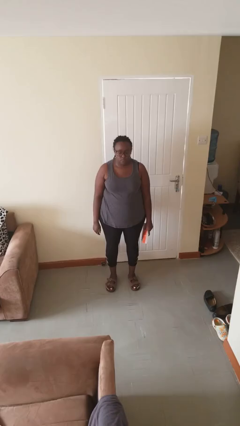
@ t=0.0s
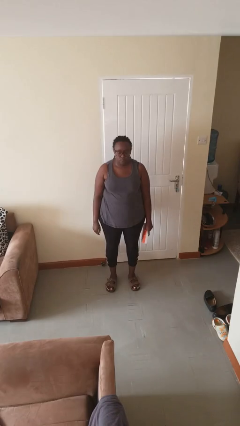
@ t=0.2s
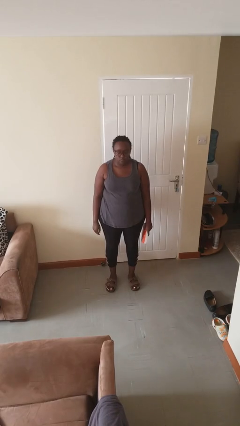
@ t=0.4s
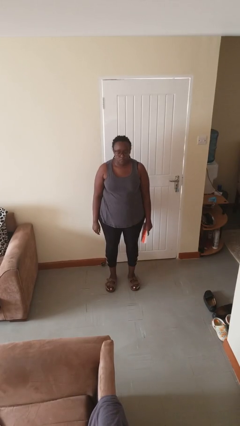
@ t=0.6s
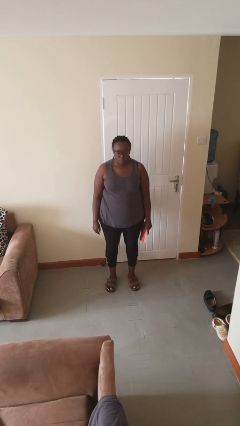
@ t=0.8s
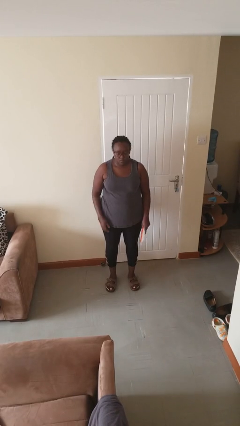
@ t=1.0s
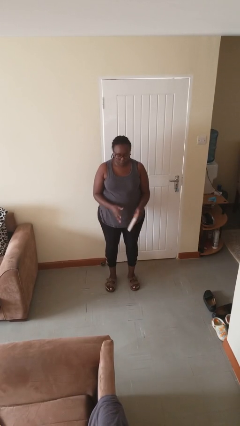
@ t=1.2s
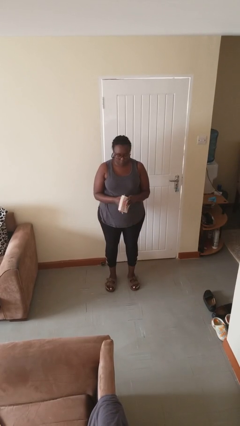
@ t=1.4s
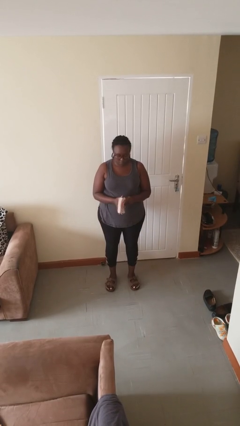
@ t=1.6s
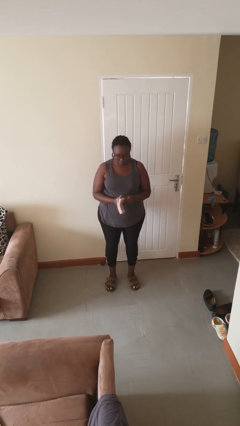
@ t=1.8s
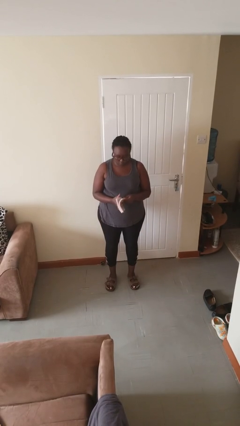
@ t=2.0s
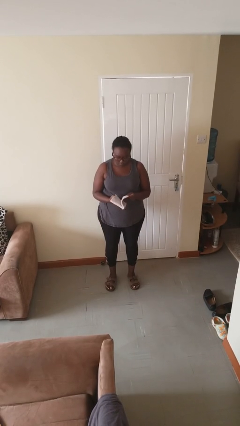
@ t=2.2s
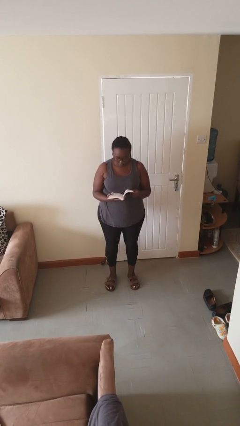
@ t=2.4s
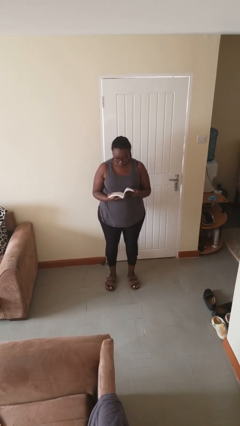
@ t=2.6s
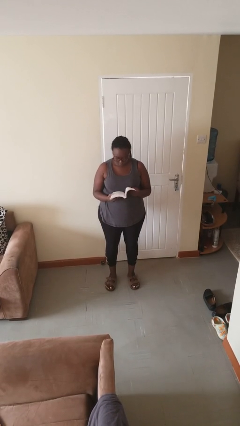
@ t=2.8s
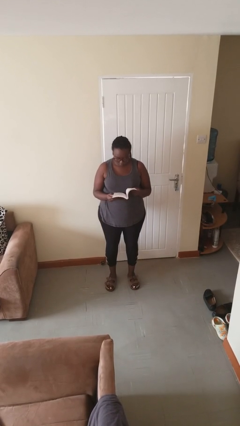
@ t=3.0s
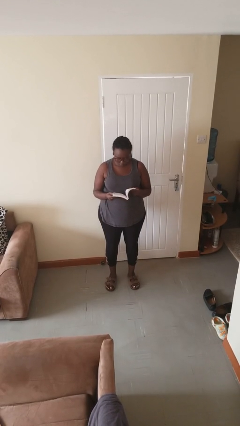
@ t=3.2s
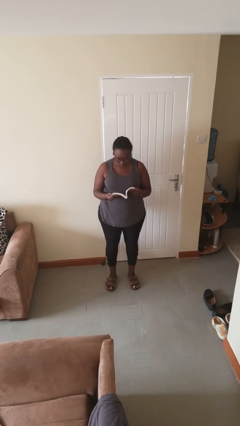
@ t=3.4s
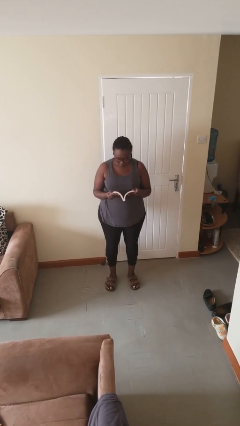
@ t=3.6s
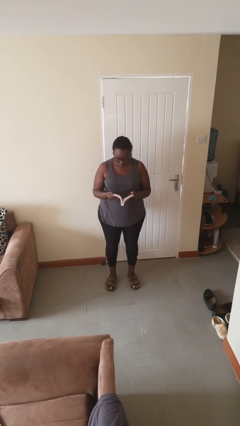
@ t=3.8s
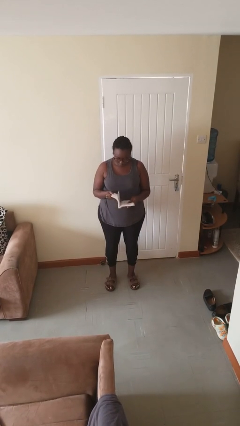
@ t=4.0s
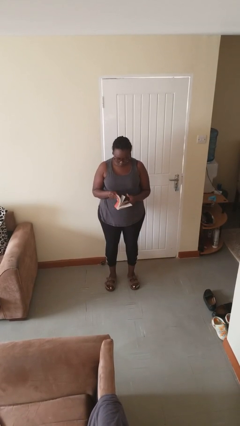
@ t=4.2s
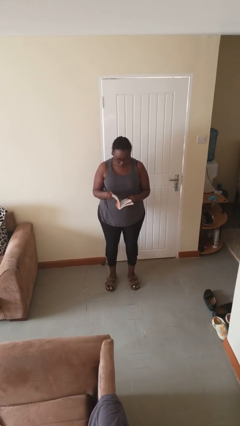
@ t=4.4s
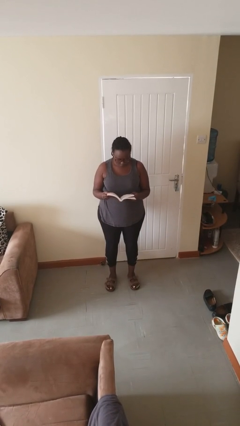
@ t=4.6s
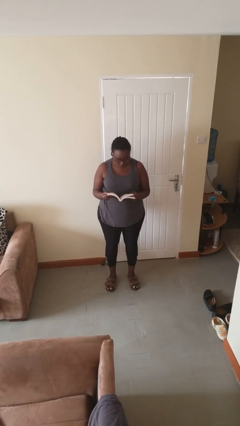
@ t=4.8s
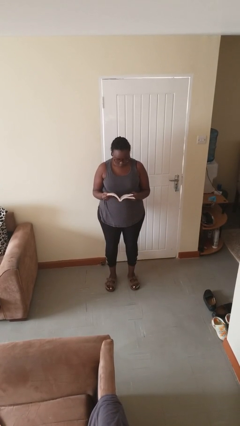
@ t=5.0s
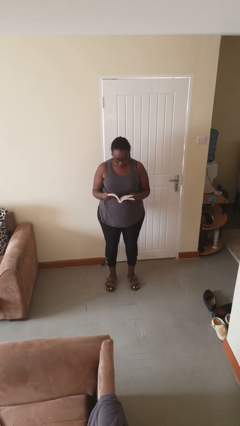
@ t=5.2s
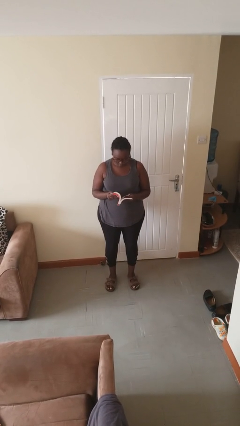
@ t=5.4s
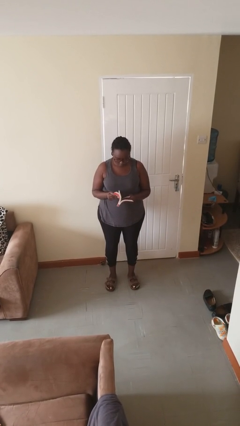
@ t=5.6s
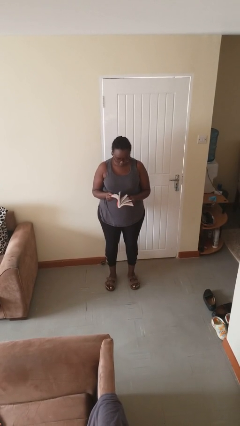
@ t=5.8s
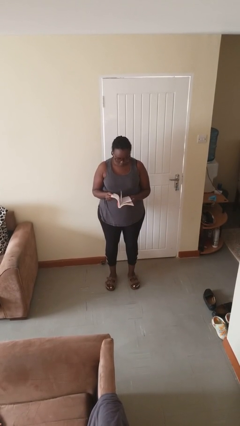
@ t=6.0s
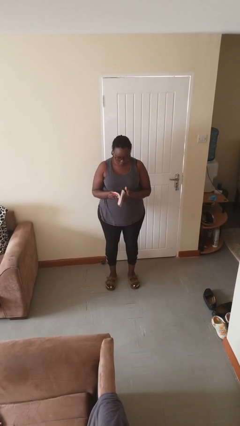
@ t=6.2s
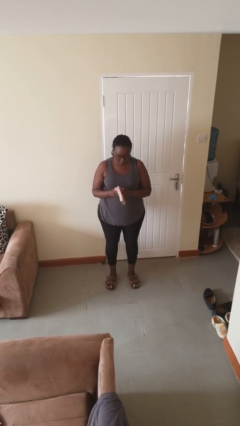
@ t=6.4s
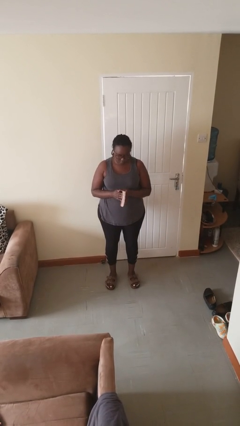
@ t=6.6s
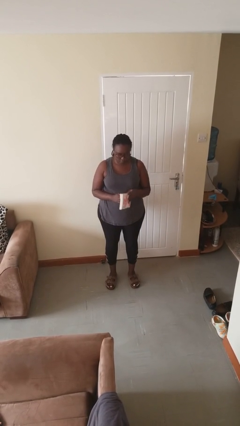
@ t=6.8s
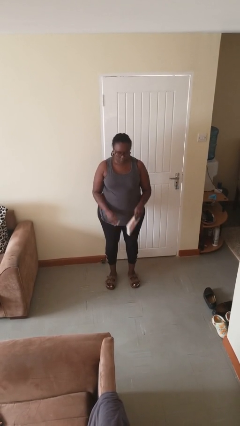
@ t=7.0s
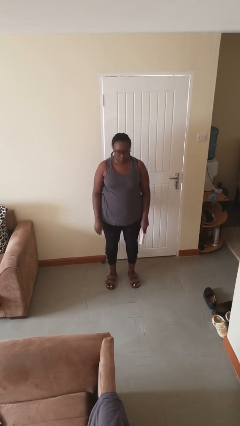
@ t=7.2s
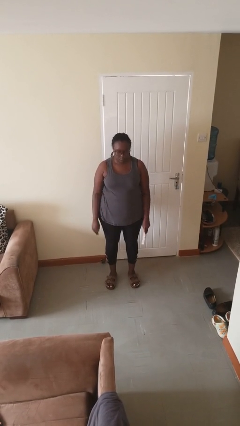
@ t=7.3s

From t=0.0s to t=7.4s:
person reads book

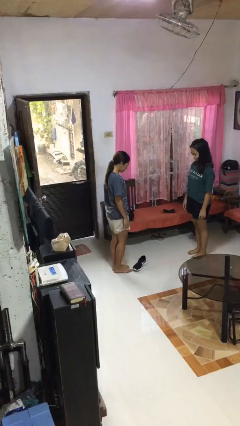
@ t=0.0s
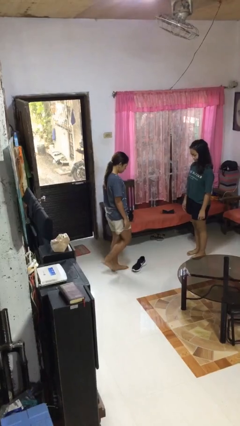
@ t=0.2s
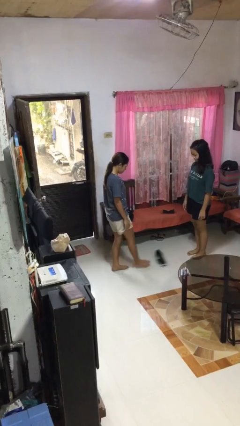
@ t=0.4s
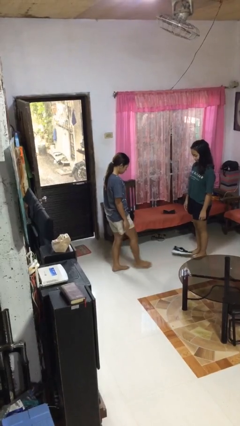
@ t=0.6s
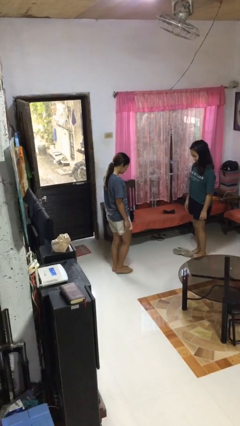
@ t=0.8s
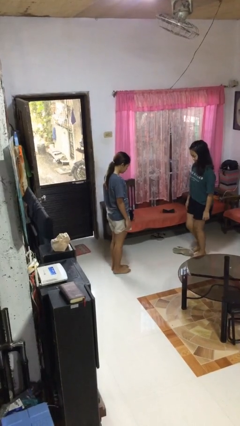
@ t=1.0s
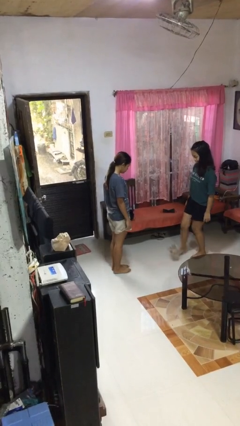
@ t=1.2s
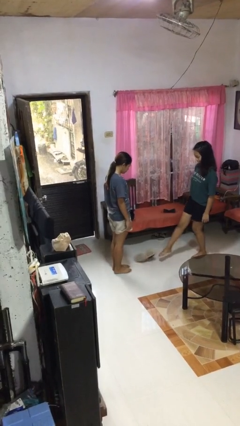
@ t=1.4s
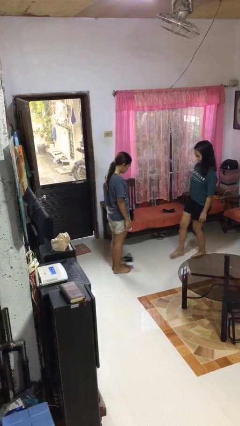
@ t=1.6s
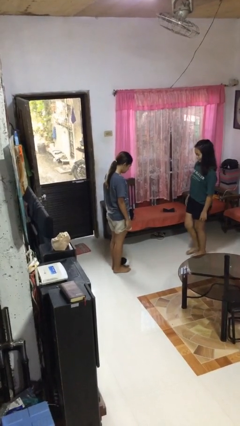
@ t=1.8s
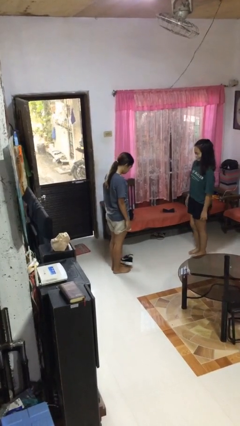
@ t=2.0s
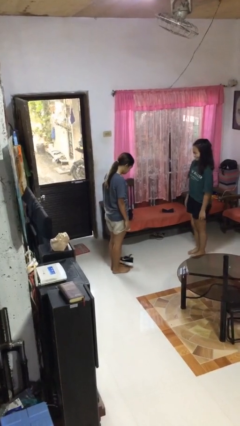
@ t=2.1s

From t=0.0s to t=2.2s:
person kicks object to person

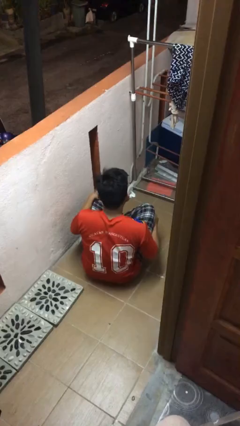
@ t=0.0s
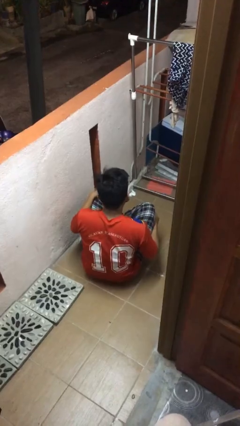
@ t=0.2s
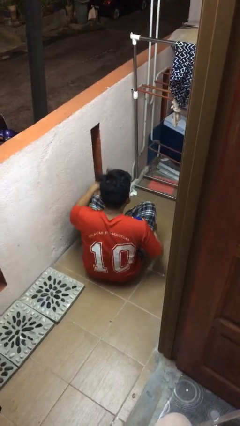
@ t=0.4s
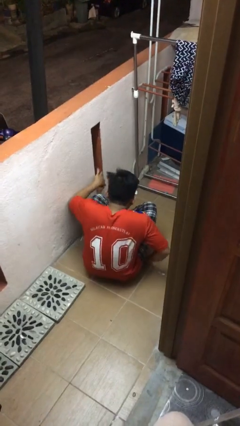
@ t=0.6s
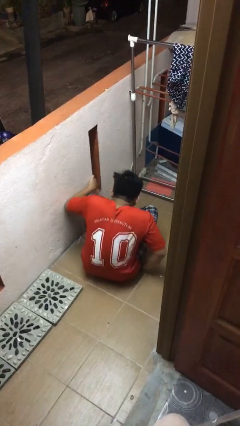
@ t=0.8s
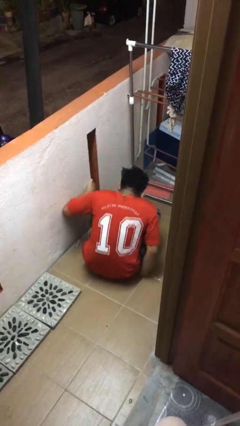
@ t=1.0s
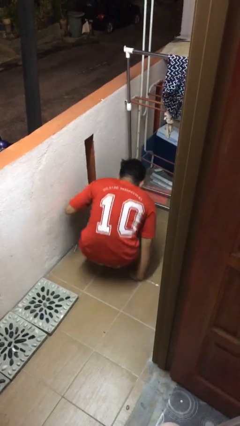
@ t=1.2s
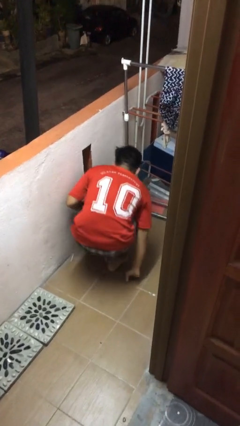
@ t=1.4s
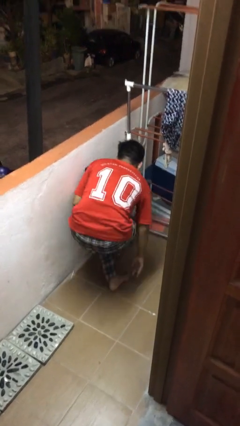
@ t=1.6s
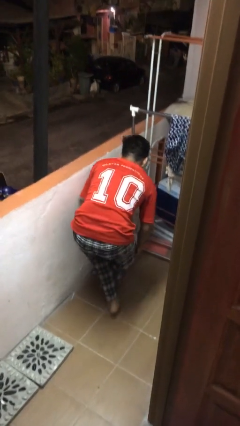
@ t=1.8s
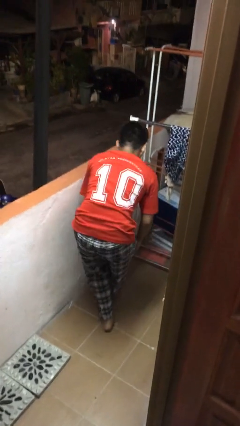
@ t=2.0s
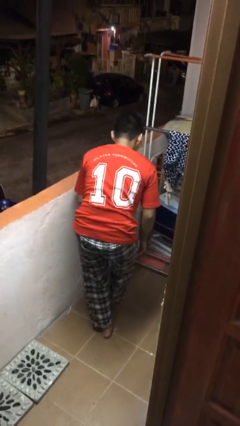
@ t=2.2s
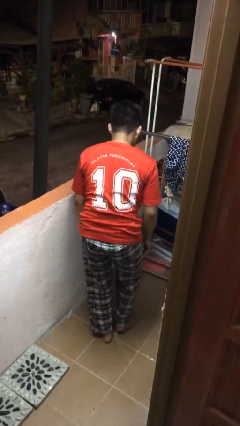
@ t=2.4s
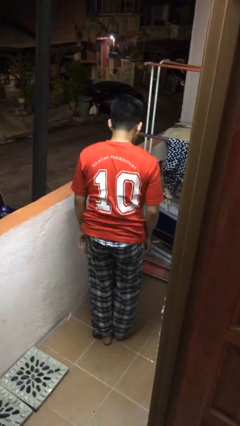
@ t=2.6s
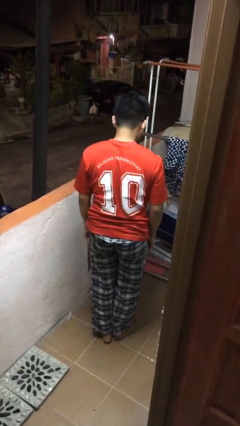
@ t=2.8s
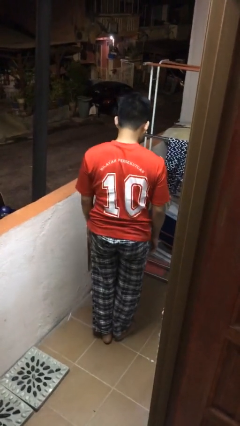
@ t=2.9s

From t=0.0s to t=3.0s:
person stands up from floor

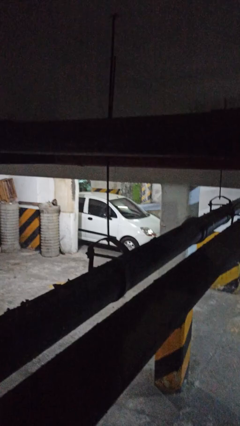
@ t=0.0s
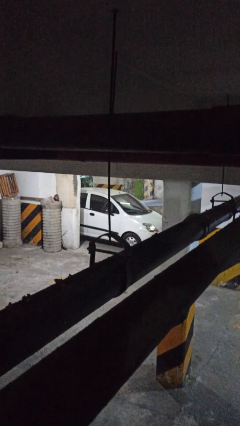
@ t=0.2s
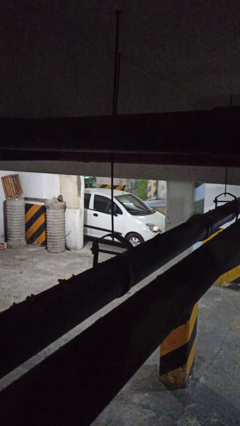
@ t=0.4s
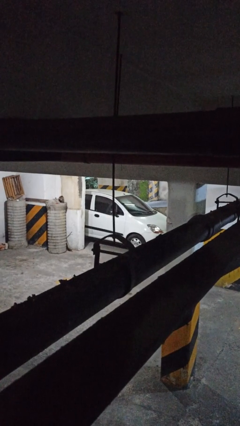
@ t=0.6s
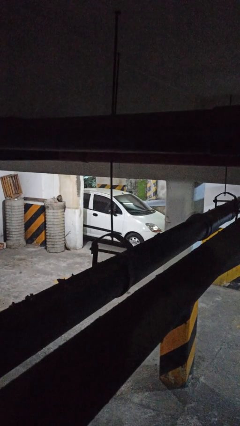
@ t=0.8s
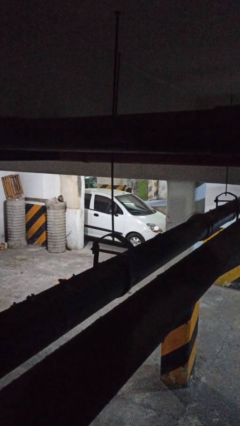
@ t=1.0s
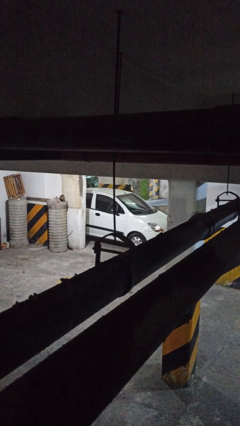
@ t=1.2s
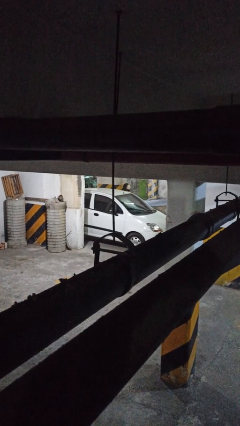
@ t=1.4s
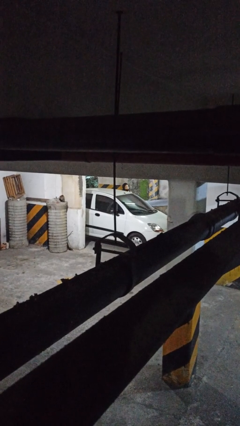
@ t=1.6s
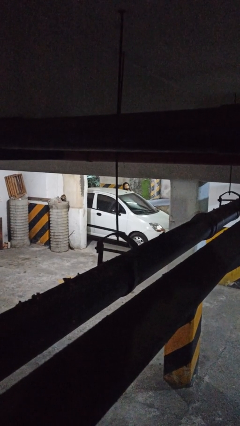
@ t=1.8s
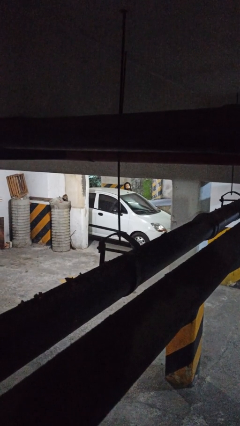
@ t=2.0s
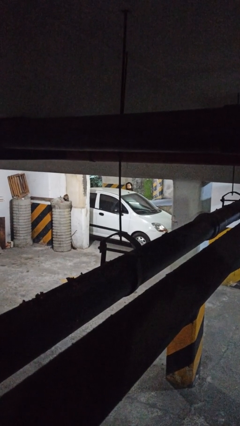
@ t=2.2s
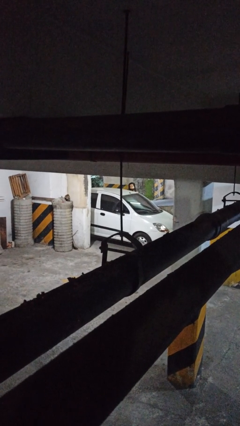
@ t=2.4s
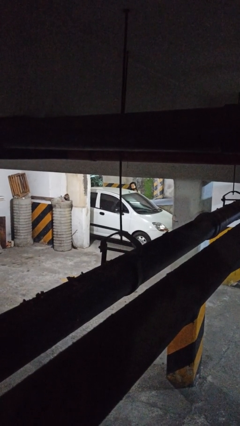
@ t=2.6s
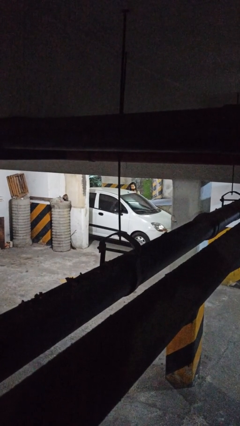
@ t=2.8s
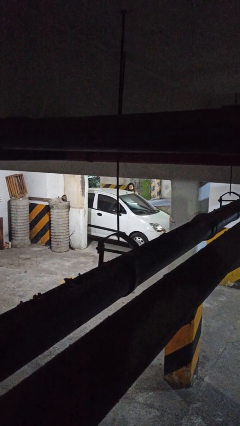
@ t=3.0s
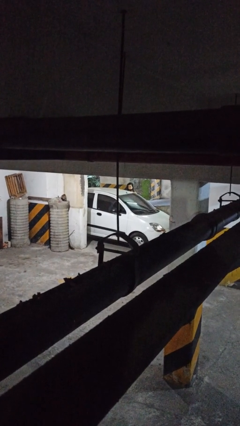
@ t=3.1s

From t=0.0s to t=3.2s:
car drops off person

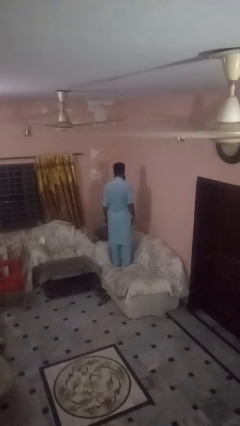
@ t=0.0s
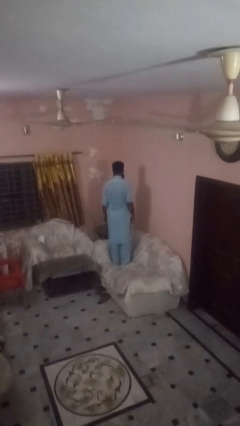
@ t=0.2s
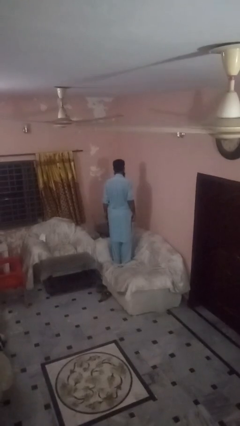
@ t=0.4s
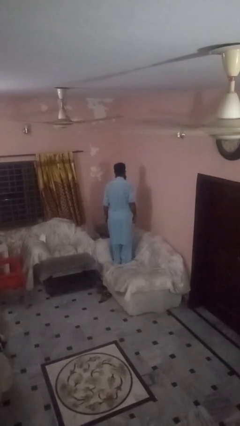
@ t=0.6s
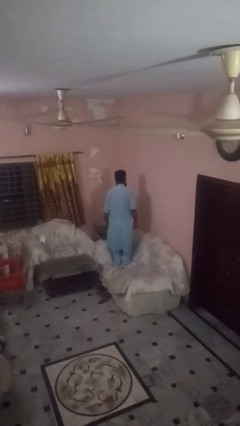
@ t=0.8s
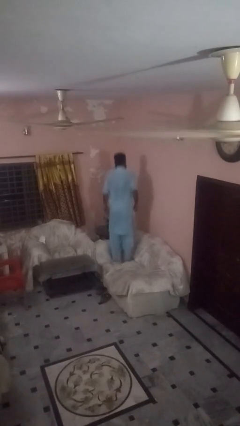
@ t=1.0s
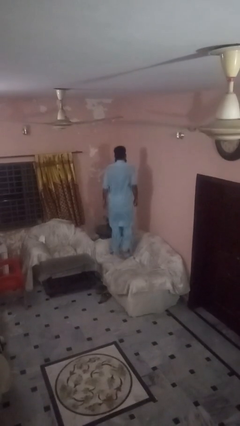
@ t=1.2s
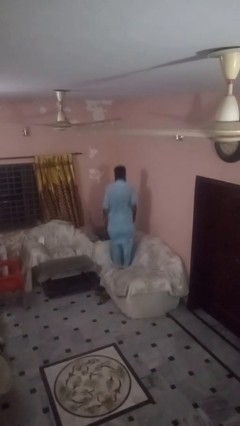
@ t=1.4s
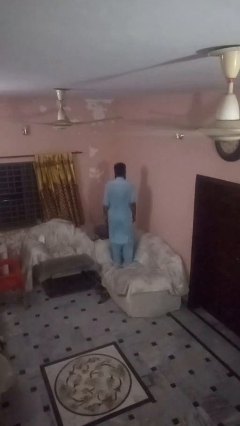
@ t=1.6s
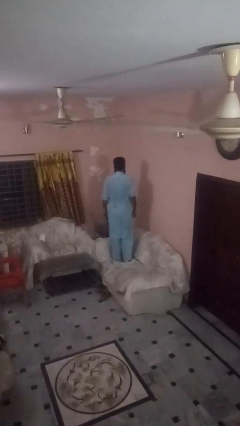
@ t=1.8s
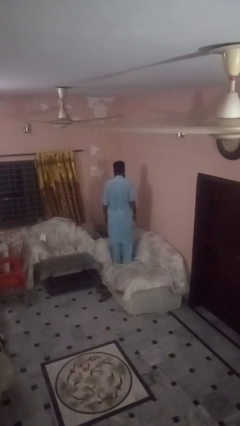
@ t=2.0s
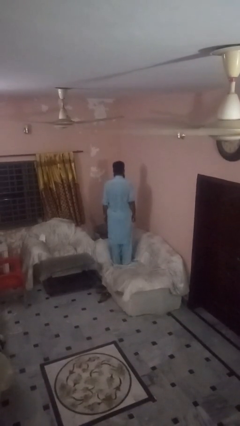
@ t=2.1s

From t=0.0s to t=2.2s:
person jumps on couch
